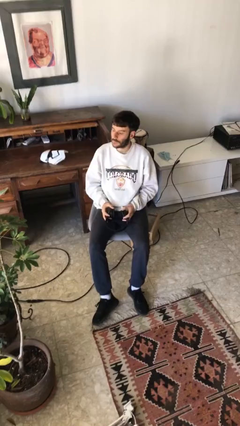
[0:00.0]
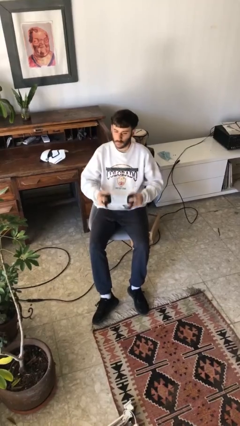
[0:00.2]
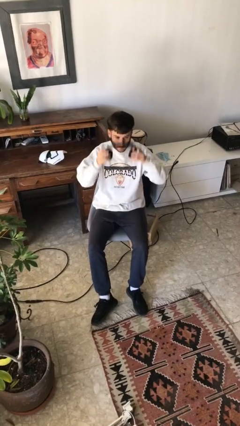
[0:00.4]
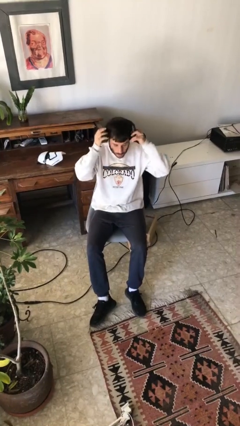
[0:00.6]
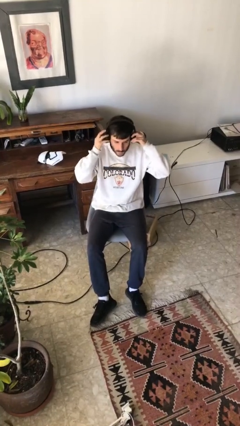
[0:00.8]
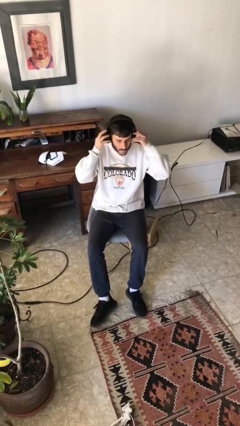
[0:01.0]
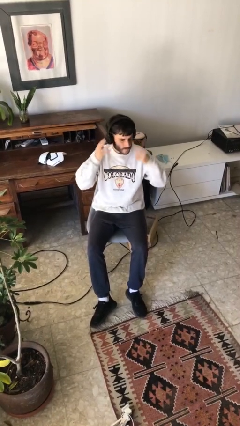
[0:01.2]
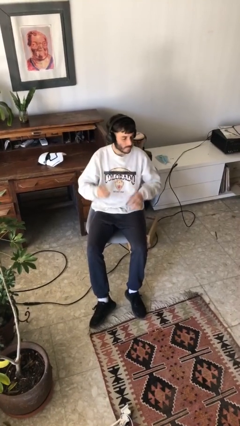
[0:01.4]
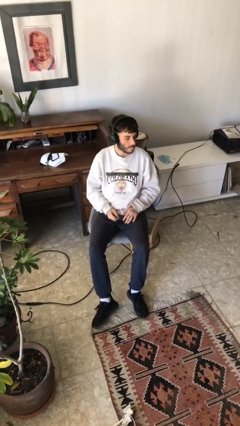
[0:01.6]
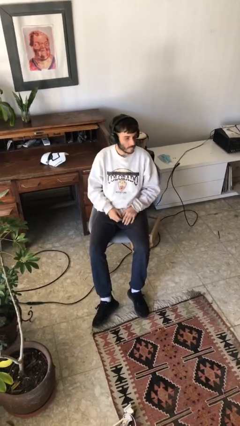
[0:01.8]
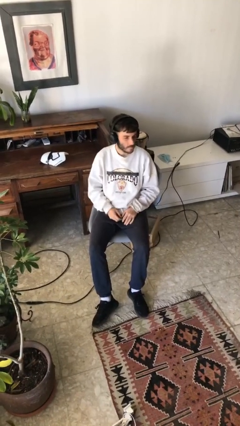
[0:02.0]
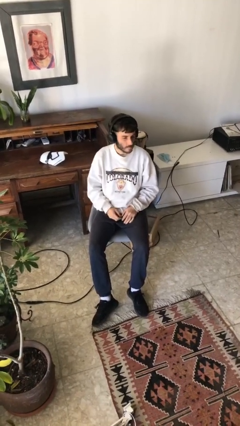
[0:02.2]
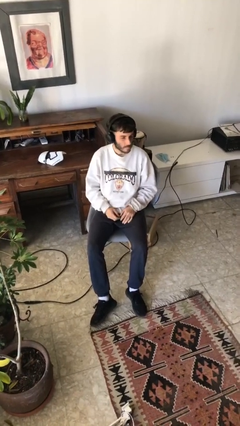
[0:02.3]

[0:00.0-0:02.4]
person puts on headphones

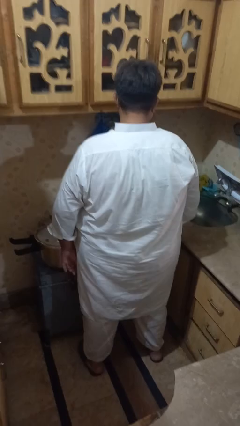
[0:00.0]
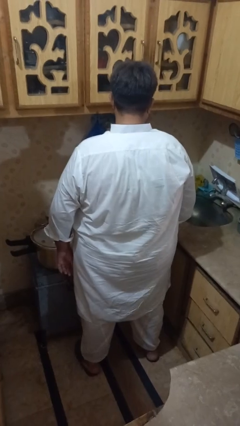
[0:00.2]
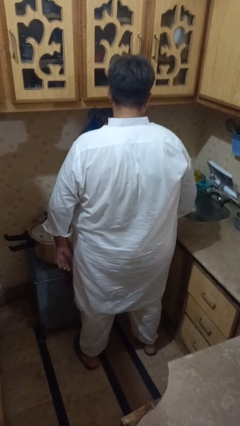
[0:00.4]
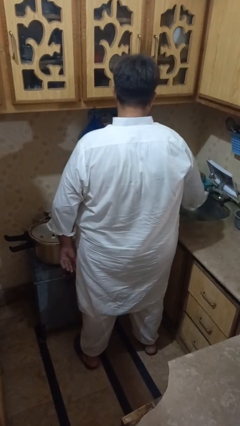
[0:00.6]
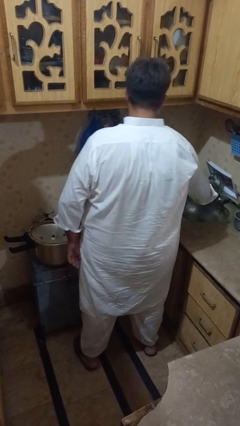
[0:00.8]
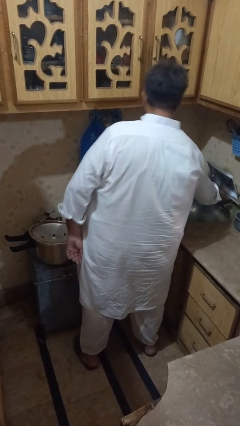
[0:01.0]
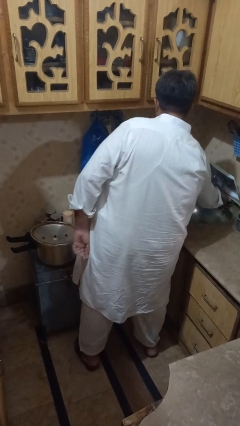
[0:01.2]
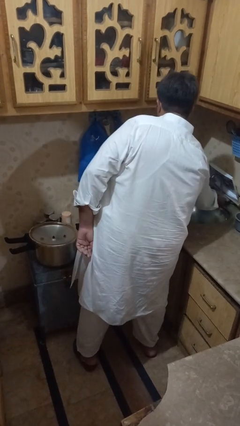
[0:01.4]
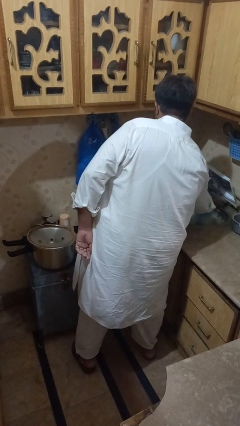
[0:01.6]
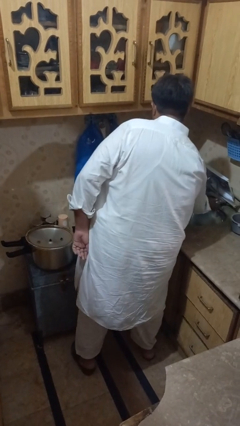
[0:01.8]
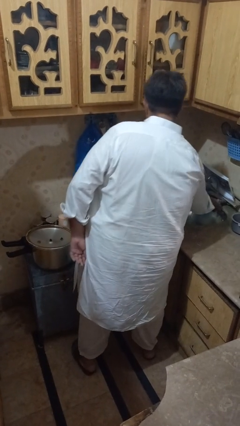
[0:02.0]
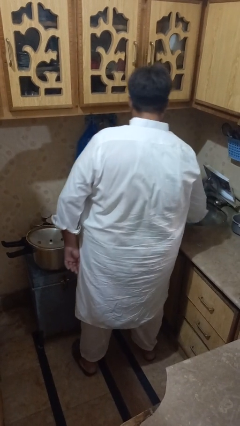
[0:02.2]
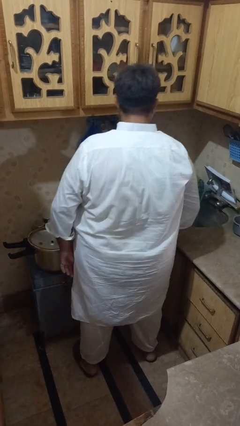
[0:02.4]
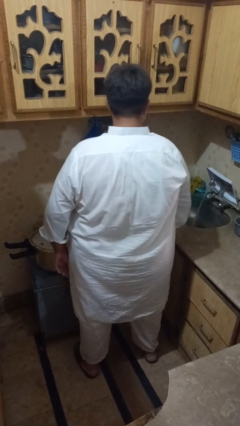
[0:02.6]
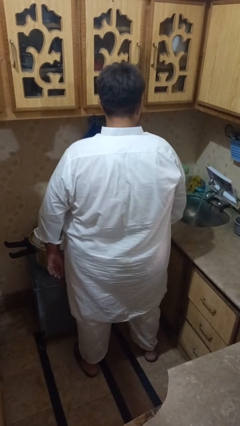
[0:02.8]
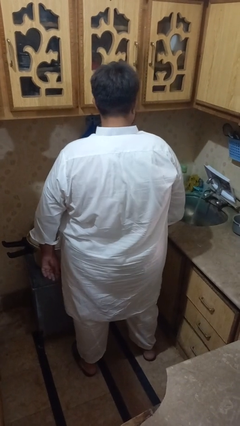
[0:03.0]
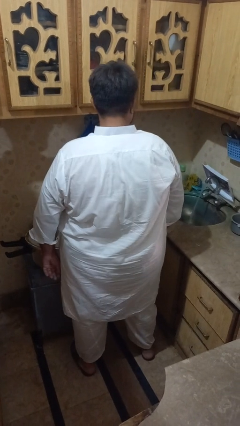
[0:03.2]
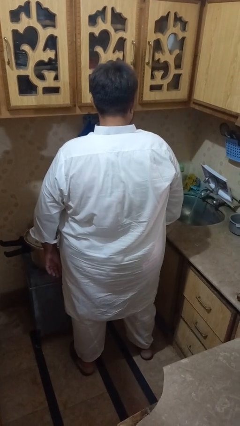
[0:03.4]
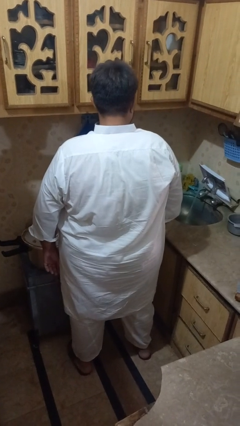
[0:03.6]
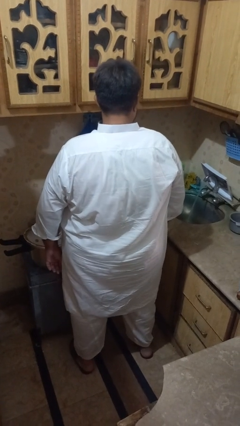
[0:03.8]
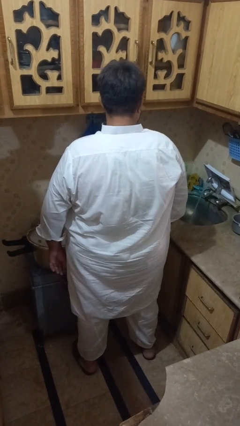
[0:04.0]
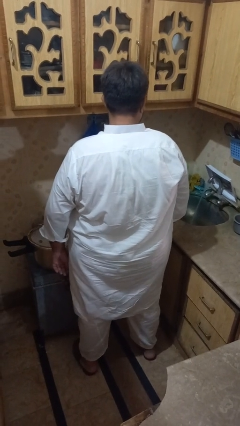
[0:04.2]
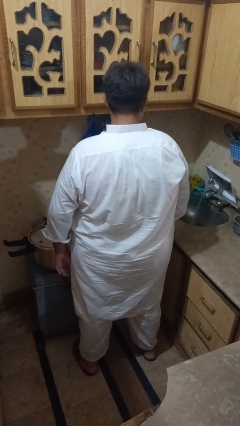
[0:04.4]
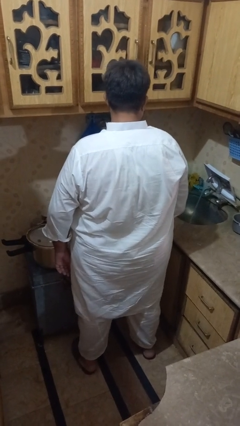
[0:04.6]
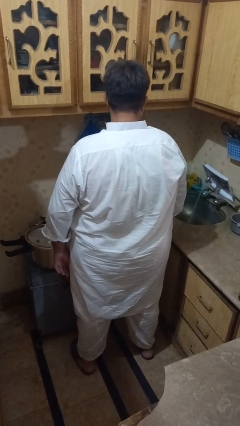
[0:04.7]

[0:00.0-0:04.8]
person turns on faucet

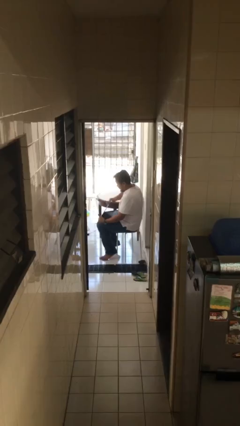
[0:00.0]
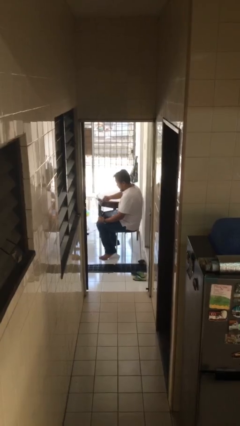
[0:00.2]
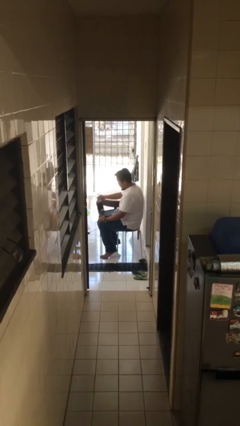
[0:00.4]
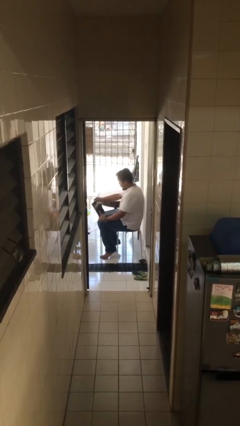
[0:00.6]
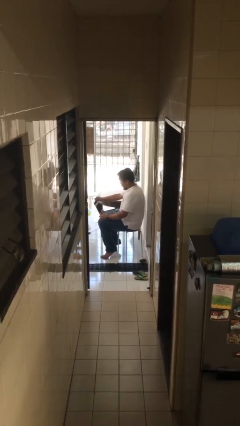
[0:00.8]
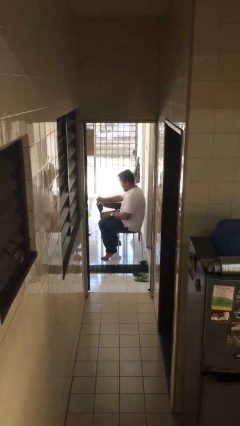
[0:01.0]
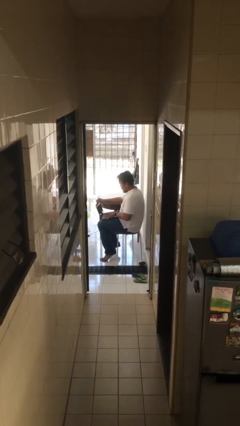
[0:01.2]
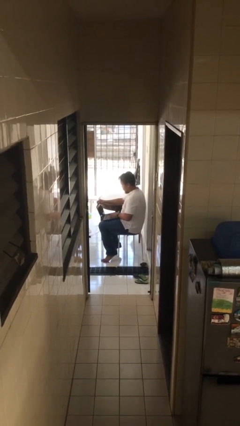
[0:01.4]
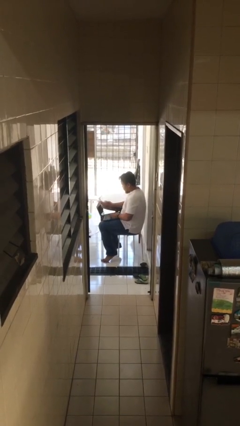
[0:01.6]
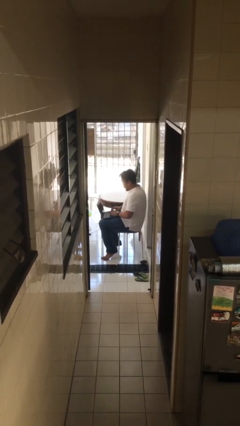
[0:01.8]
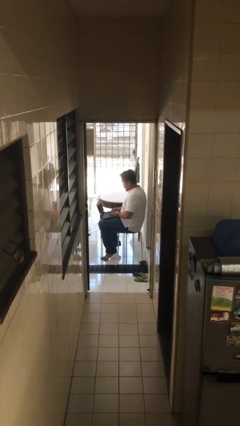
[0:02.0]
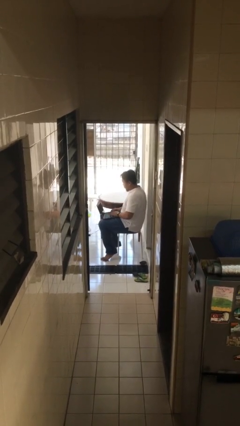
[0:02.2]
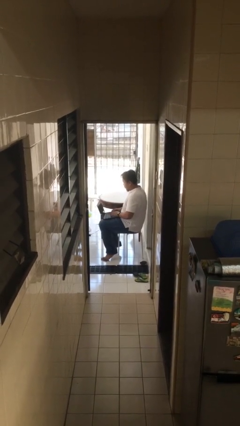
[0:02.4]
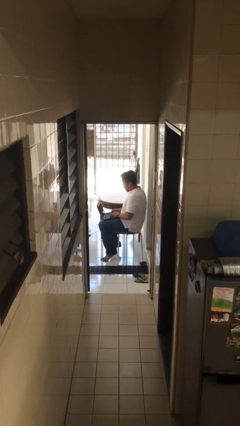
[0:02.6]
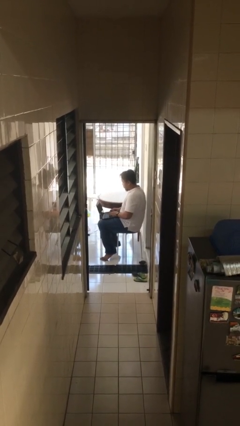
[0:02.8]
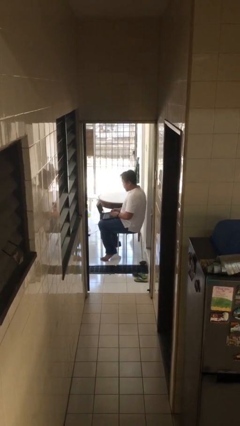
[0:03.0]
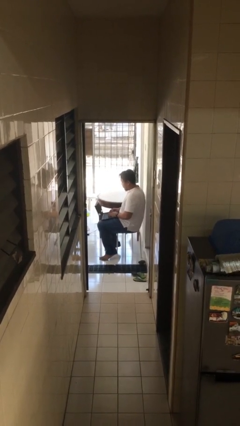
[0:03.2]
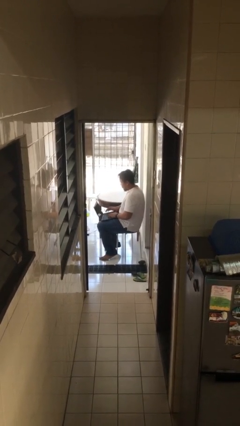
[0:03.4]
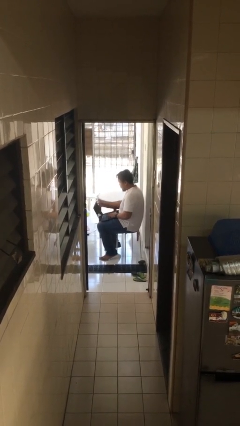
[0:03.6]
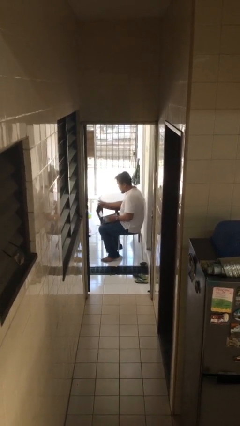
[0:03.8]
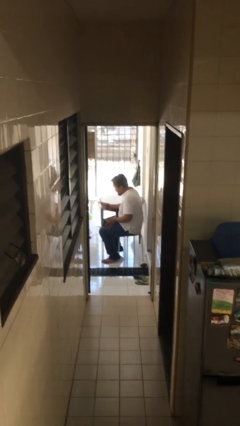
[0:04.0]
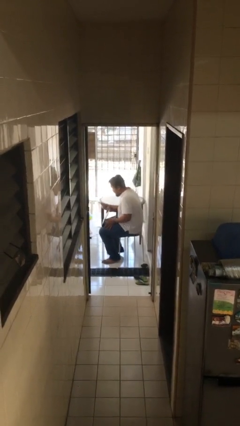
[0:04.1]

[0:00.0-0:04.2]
person interacts with laptop

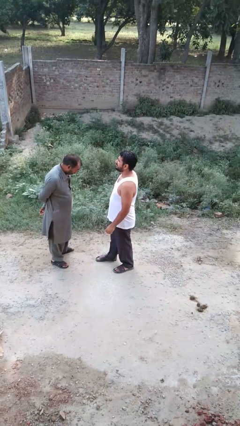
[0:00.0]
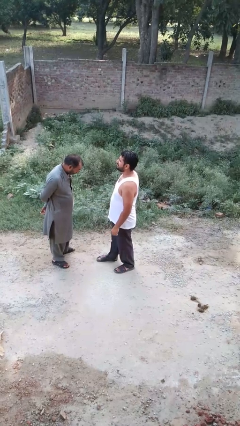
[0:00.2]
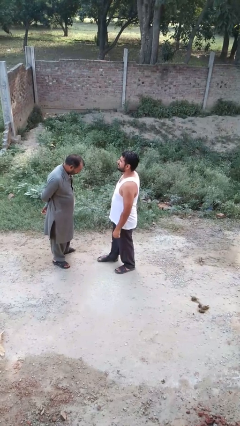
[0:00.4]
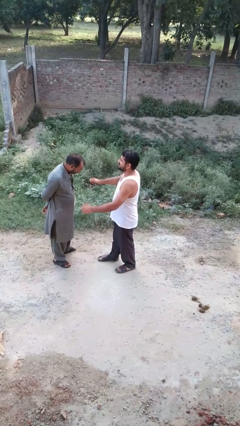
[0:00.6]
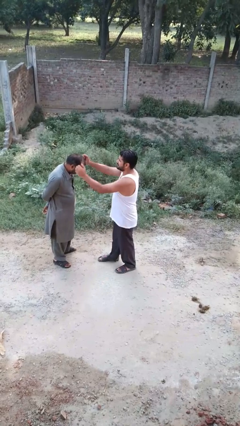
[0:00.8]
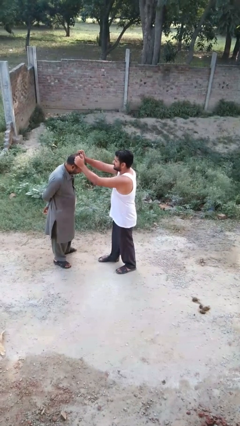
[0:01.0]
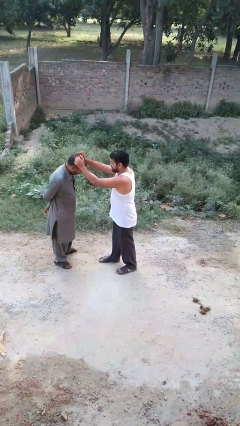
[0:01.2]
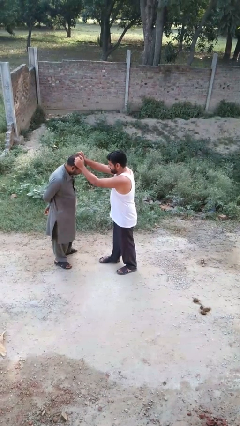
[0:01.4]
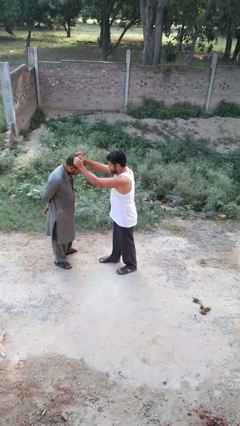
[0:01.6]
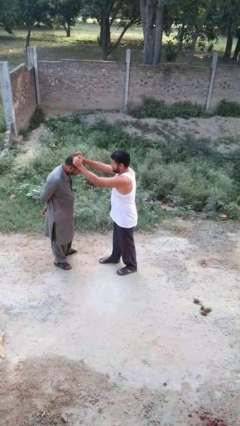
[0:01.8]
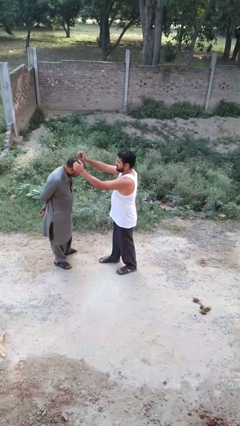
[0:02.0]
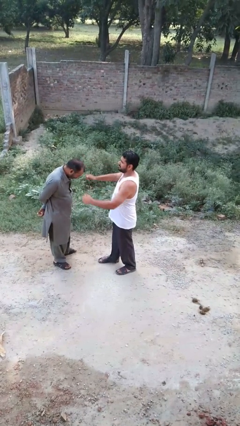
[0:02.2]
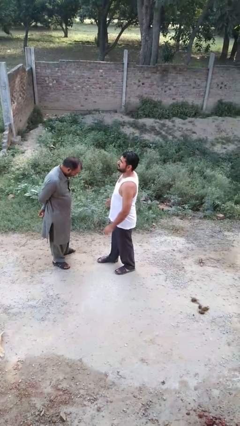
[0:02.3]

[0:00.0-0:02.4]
person grabs person by hair

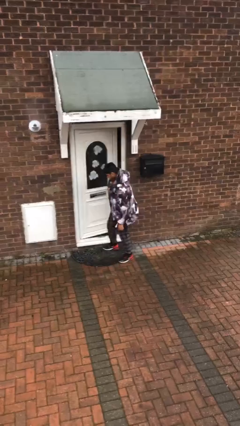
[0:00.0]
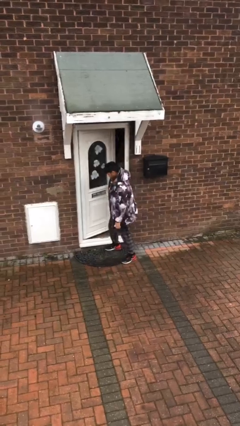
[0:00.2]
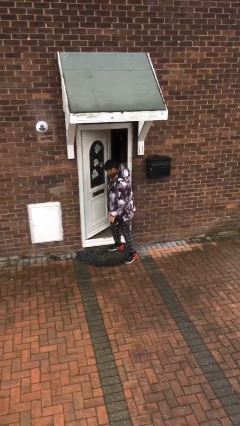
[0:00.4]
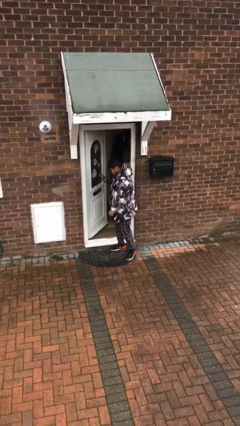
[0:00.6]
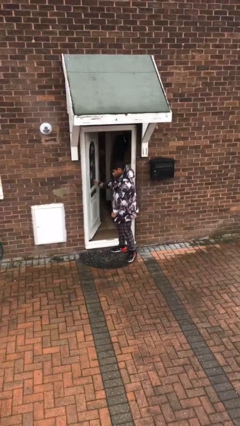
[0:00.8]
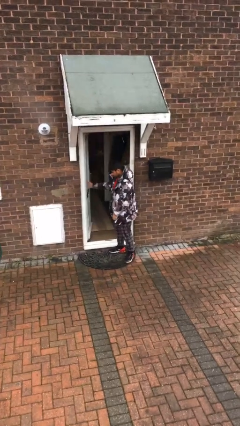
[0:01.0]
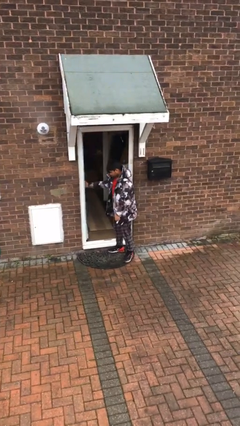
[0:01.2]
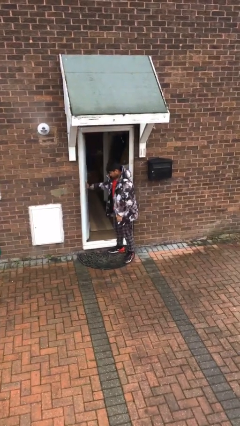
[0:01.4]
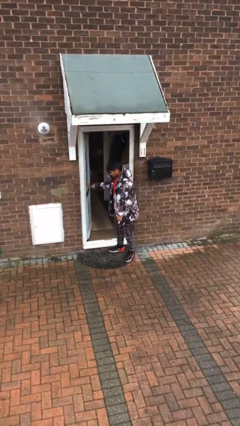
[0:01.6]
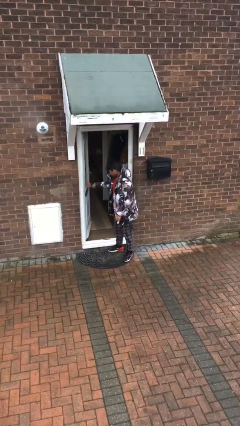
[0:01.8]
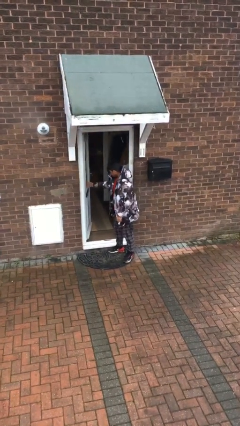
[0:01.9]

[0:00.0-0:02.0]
person opens facility door

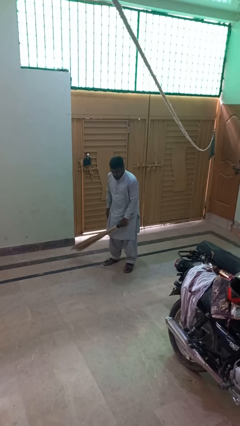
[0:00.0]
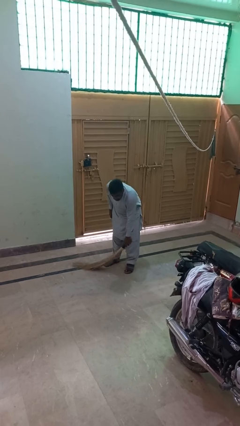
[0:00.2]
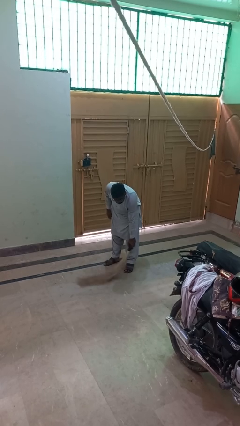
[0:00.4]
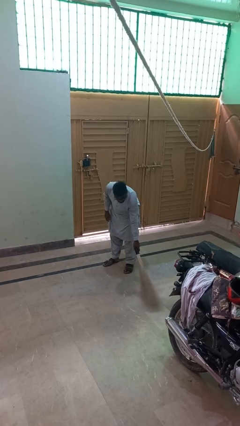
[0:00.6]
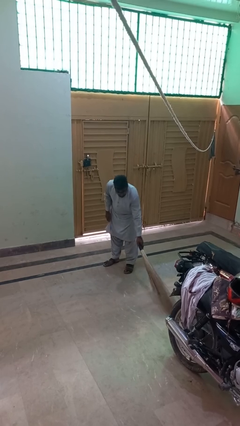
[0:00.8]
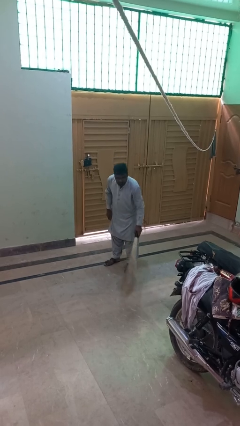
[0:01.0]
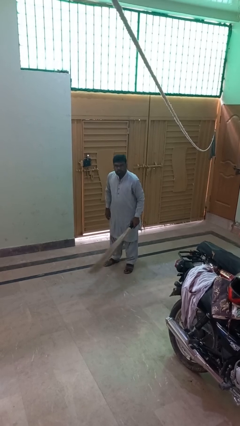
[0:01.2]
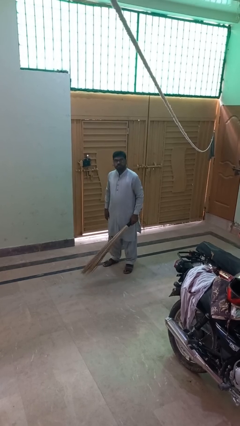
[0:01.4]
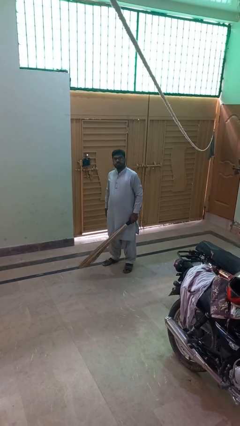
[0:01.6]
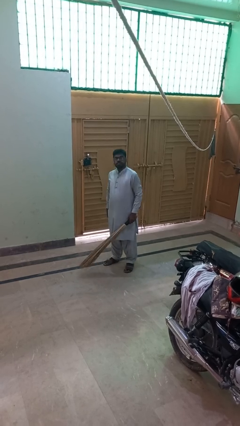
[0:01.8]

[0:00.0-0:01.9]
person sweeps floor
